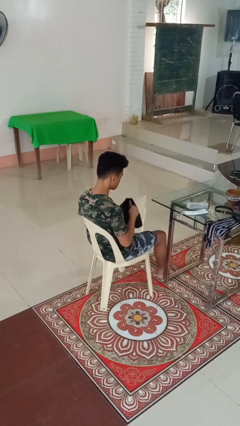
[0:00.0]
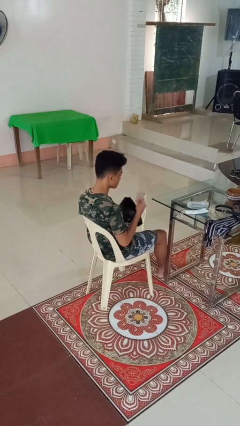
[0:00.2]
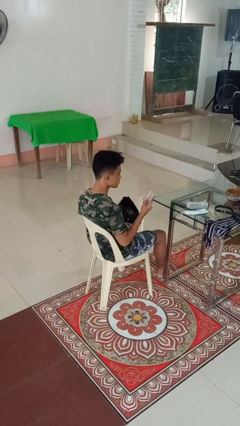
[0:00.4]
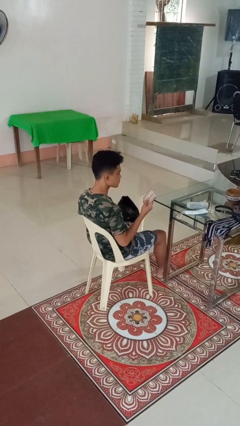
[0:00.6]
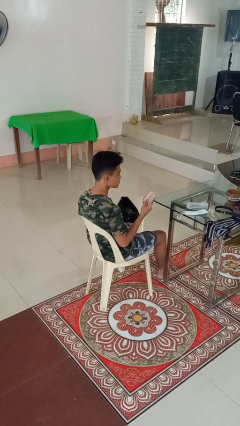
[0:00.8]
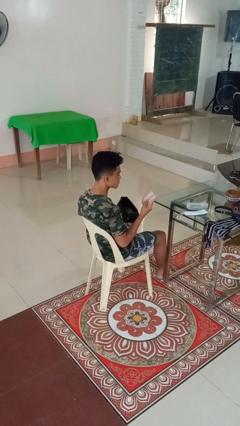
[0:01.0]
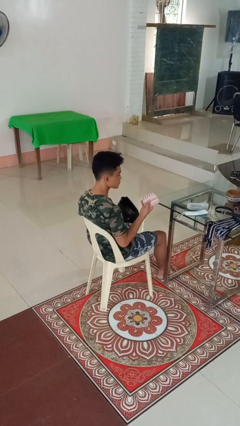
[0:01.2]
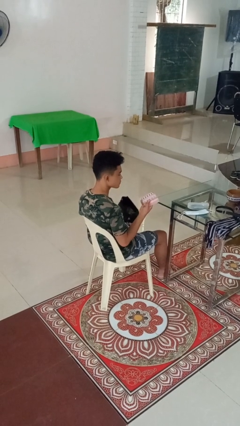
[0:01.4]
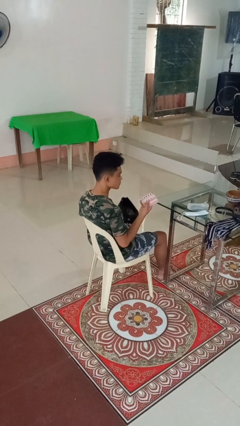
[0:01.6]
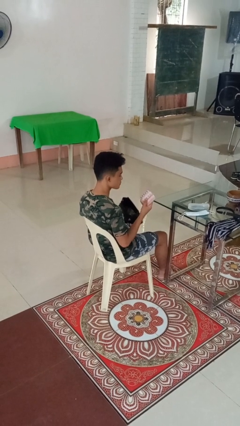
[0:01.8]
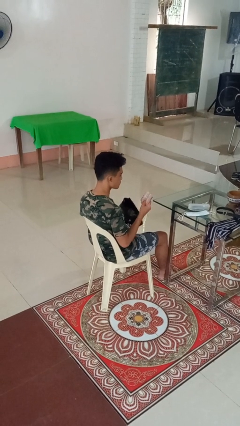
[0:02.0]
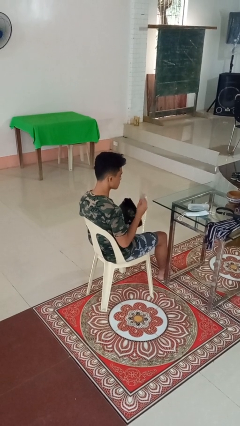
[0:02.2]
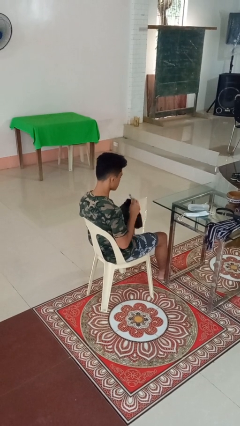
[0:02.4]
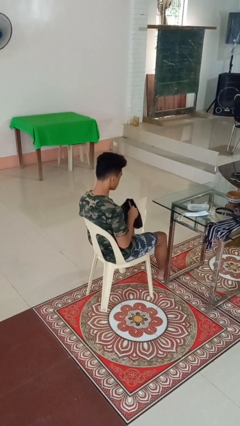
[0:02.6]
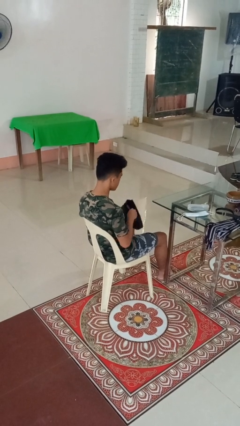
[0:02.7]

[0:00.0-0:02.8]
person takes object from purse

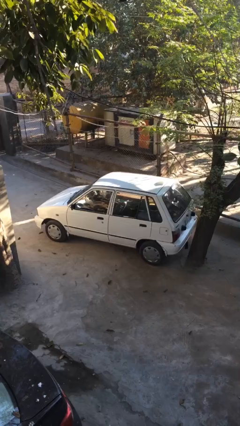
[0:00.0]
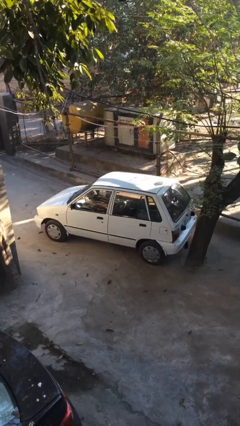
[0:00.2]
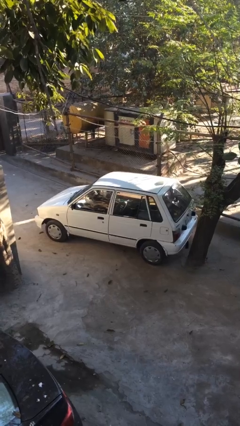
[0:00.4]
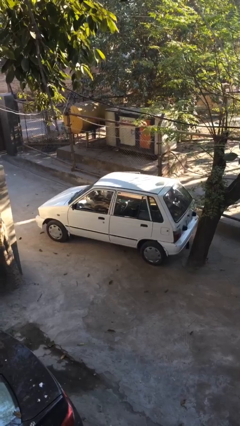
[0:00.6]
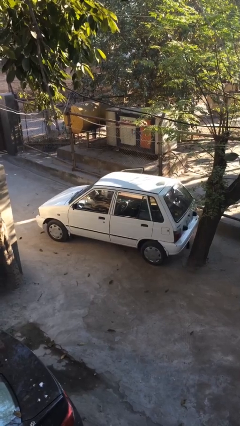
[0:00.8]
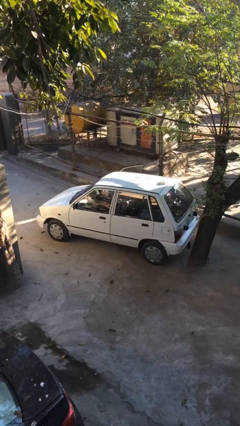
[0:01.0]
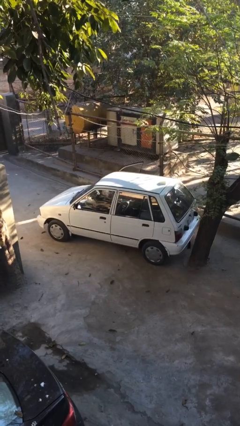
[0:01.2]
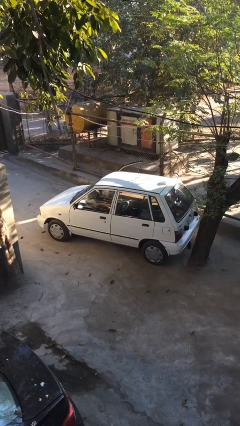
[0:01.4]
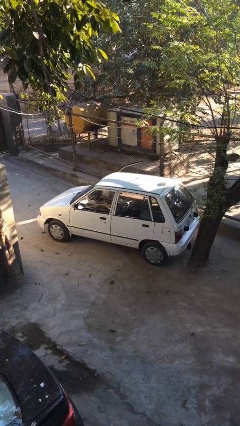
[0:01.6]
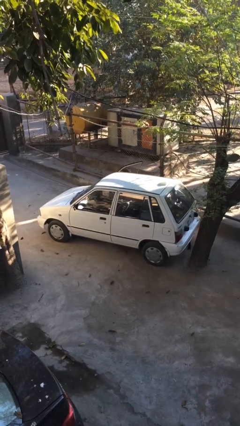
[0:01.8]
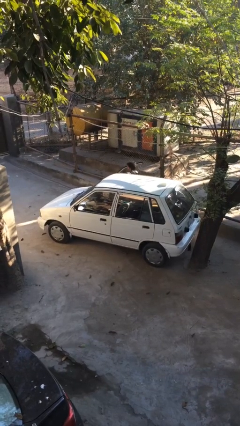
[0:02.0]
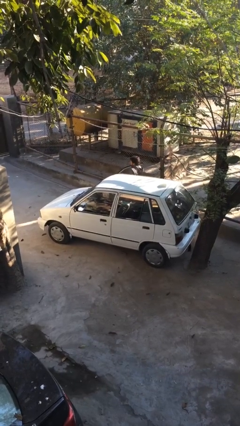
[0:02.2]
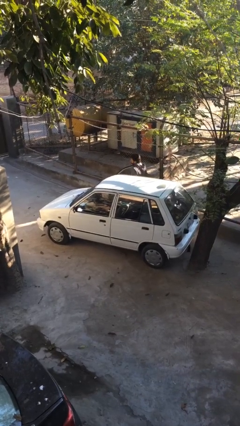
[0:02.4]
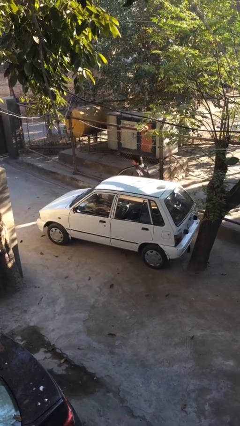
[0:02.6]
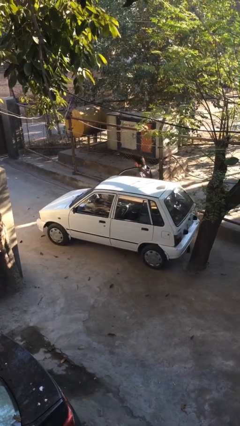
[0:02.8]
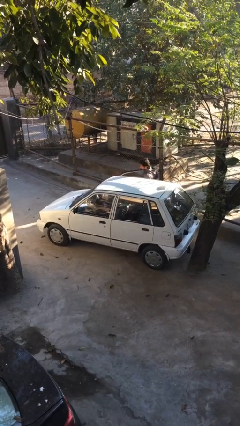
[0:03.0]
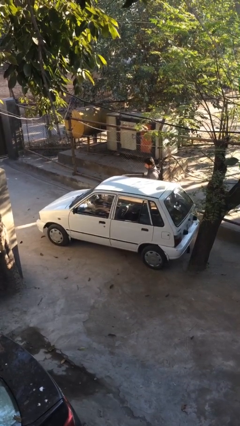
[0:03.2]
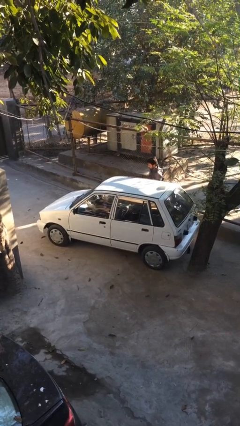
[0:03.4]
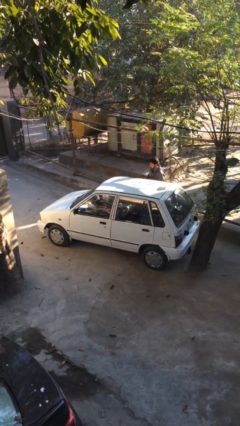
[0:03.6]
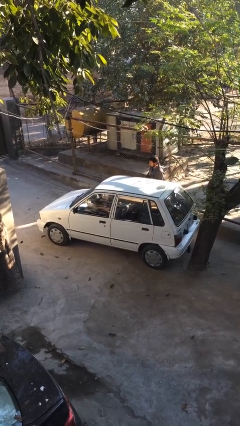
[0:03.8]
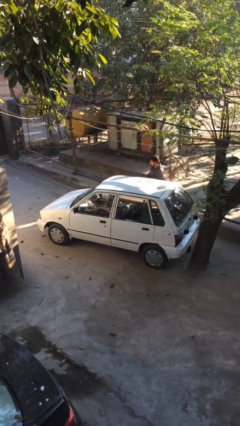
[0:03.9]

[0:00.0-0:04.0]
car drops off person

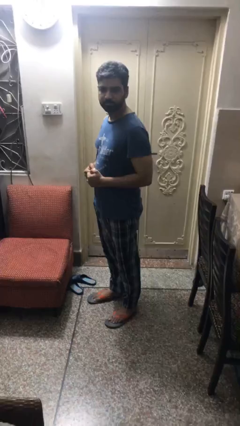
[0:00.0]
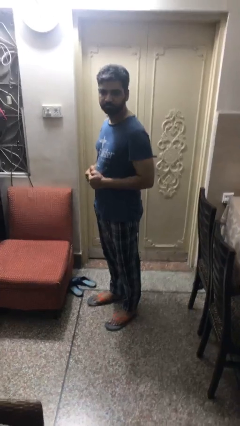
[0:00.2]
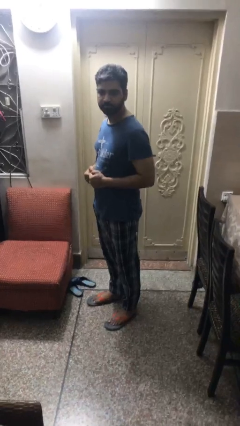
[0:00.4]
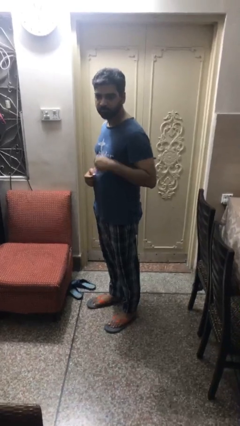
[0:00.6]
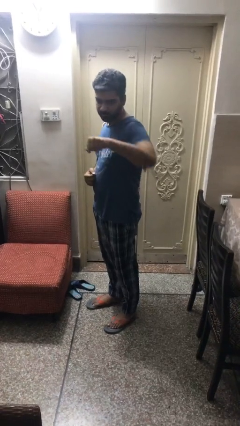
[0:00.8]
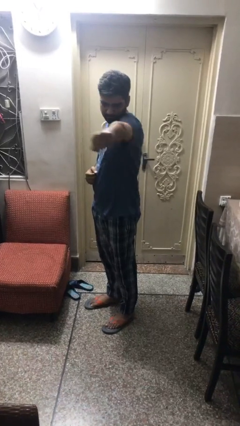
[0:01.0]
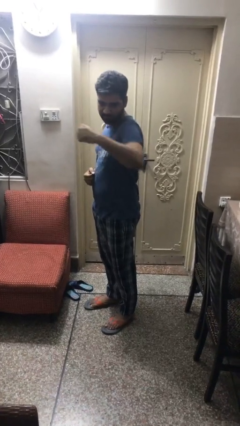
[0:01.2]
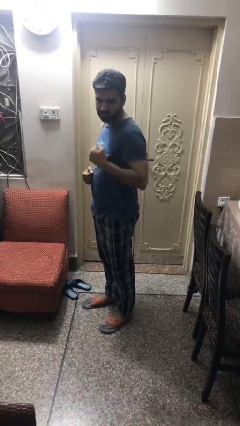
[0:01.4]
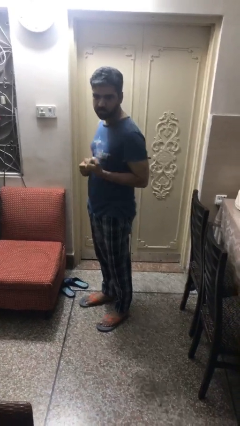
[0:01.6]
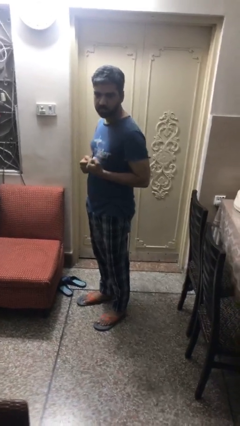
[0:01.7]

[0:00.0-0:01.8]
person karate chop

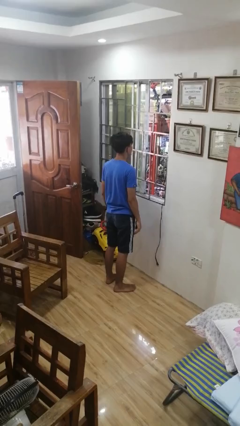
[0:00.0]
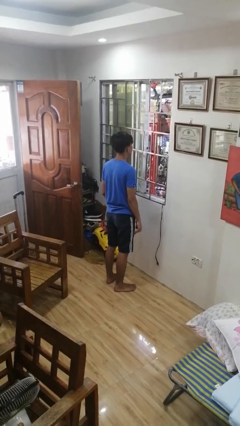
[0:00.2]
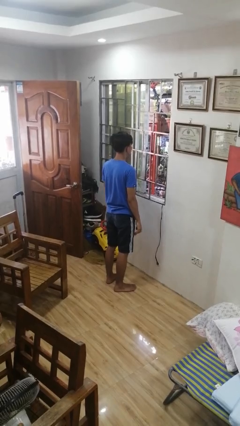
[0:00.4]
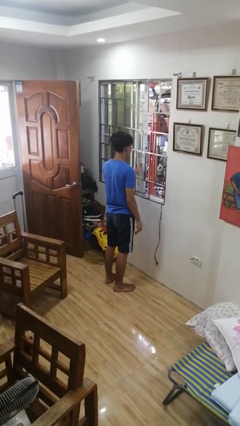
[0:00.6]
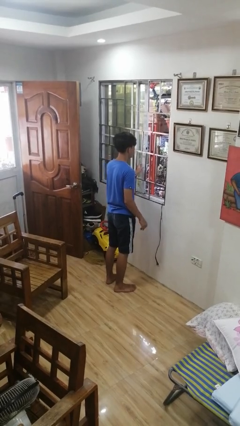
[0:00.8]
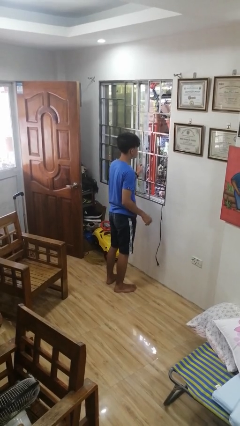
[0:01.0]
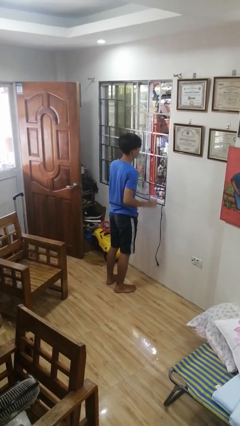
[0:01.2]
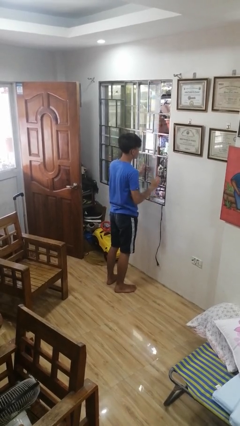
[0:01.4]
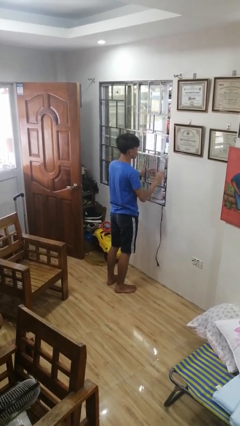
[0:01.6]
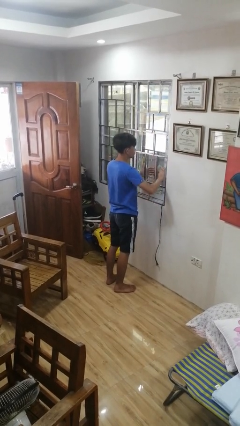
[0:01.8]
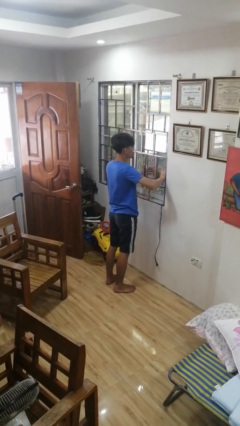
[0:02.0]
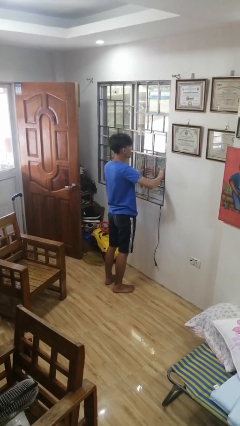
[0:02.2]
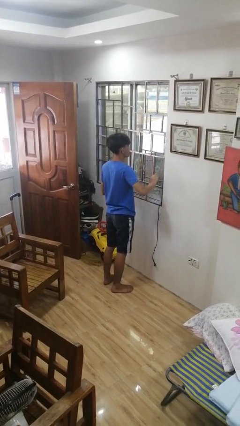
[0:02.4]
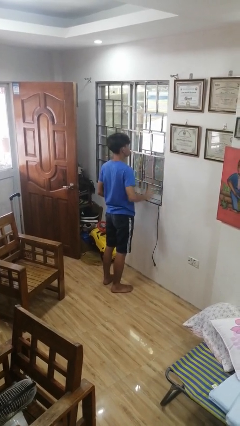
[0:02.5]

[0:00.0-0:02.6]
person closes home window

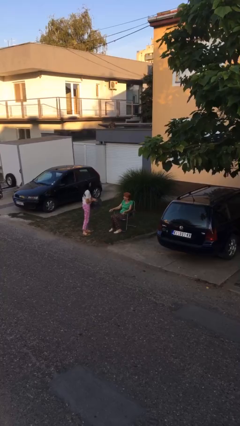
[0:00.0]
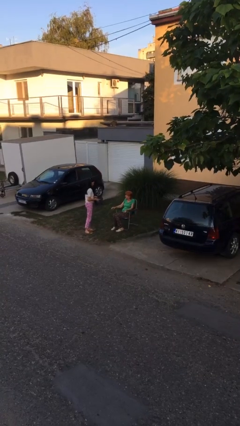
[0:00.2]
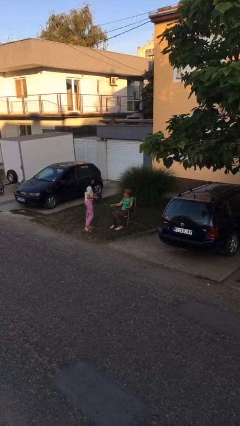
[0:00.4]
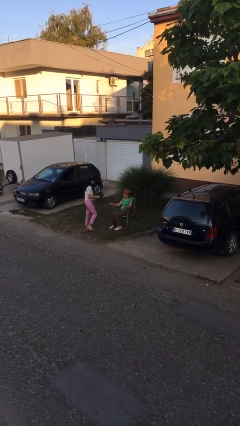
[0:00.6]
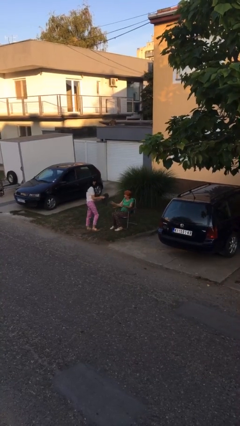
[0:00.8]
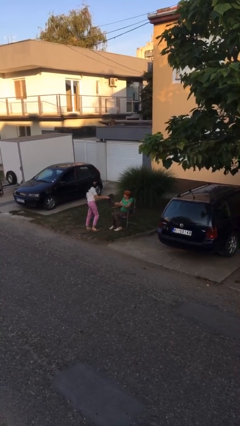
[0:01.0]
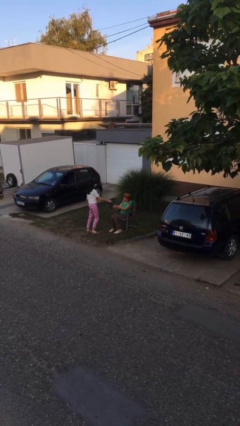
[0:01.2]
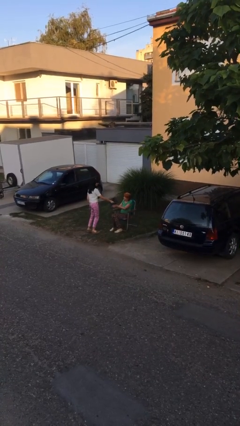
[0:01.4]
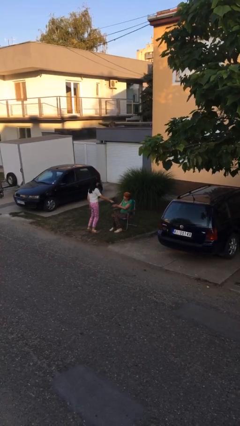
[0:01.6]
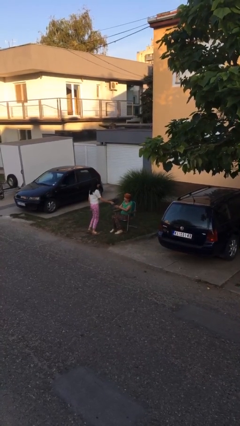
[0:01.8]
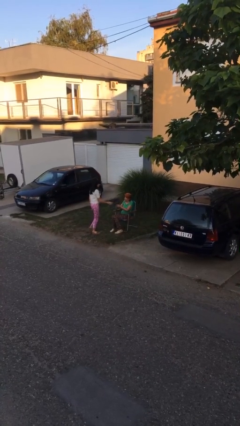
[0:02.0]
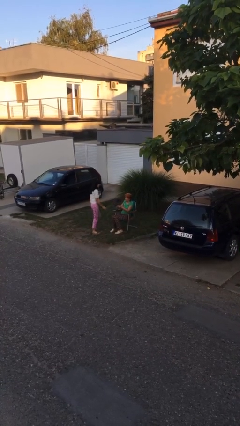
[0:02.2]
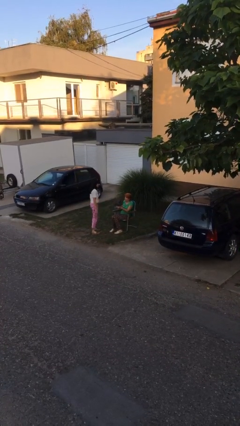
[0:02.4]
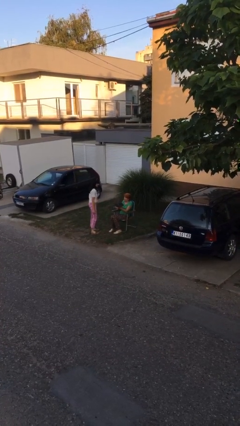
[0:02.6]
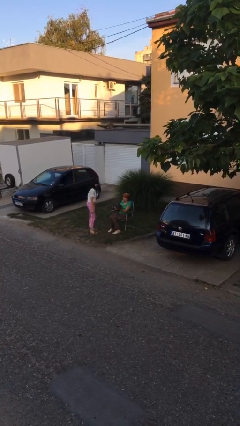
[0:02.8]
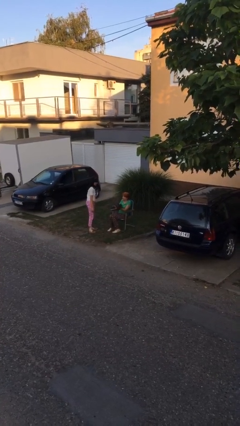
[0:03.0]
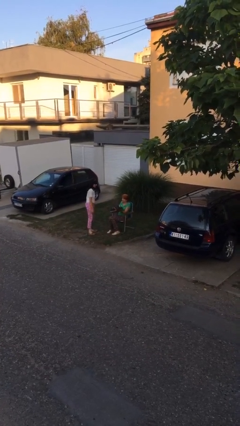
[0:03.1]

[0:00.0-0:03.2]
person transfers object to person

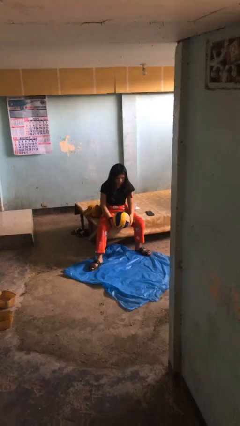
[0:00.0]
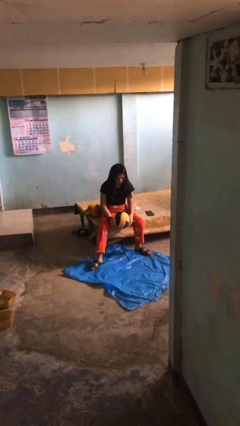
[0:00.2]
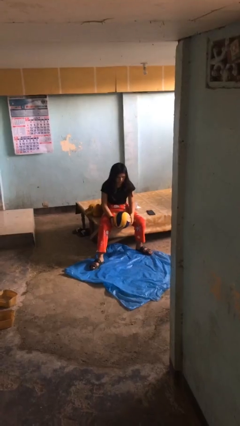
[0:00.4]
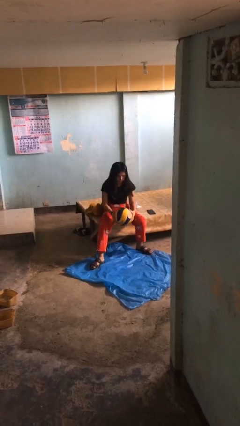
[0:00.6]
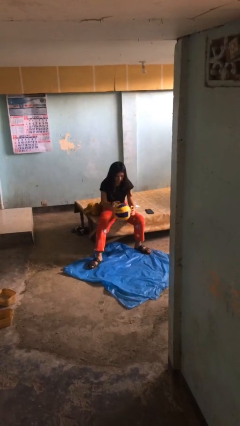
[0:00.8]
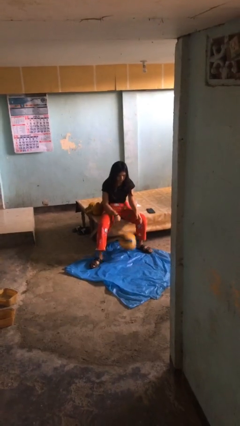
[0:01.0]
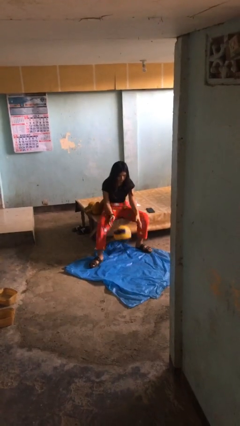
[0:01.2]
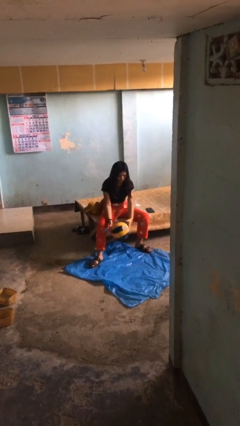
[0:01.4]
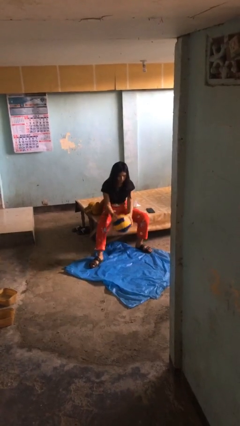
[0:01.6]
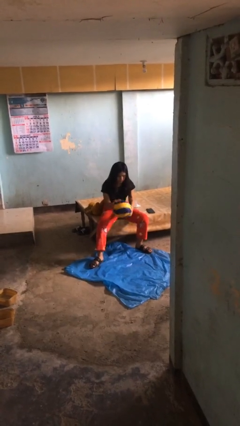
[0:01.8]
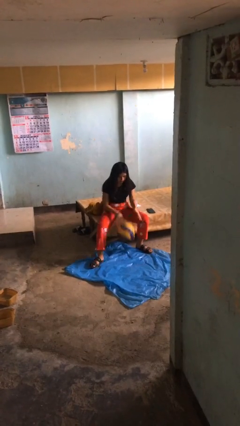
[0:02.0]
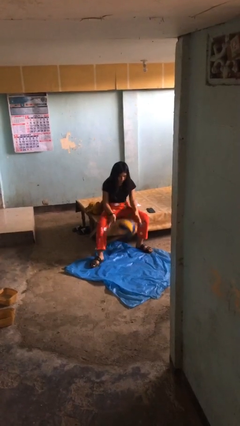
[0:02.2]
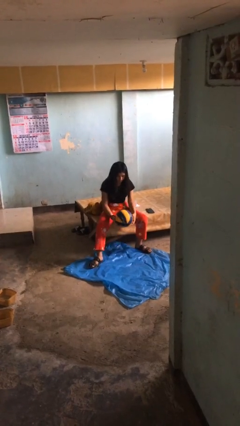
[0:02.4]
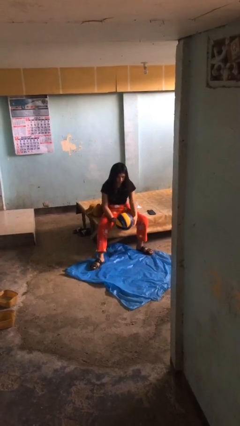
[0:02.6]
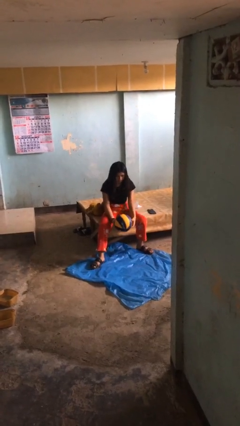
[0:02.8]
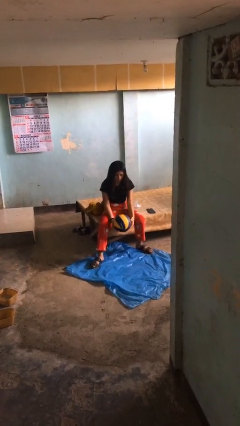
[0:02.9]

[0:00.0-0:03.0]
person bounces ball on floor
